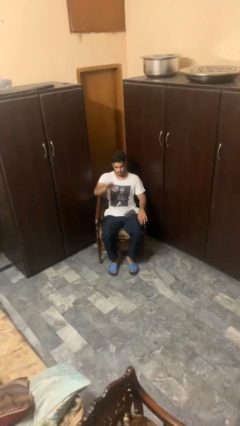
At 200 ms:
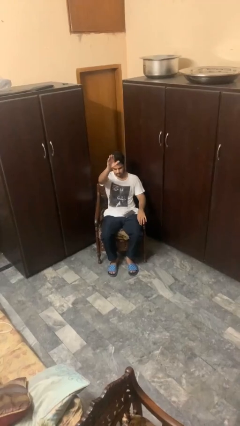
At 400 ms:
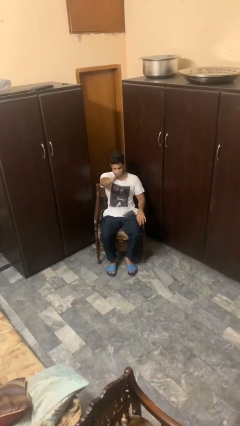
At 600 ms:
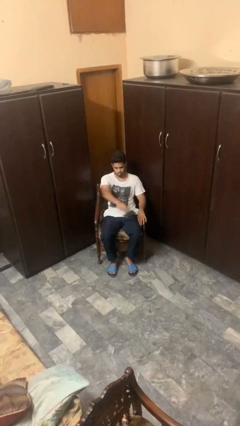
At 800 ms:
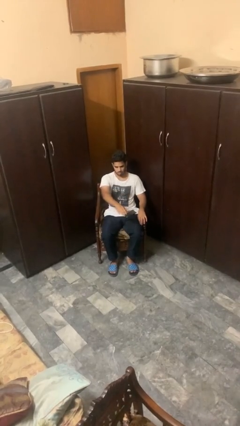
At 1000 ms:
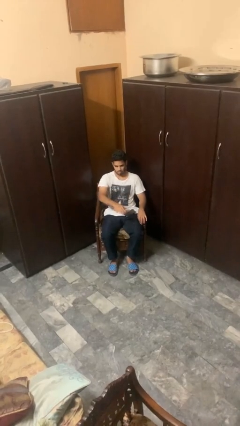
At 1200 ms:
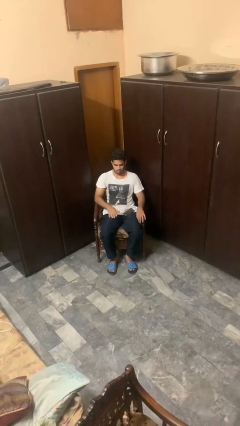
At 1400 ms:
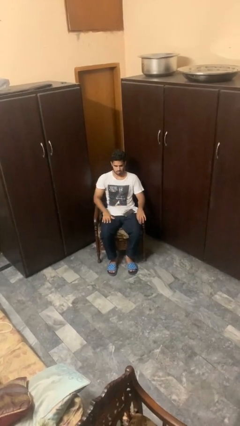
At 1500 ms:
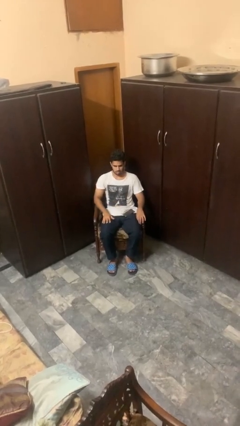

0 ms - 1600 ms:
person gestures swipe down

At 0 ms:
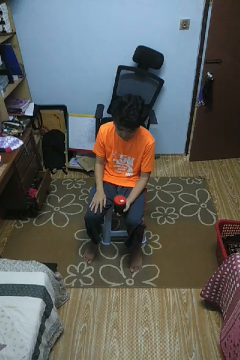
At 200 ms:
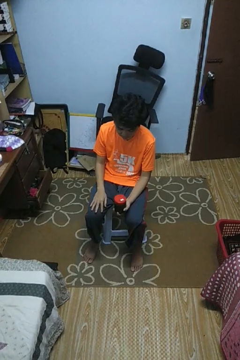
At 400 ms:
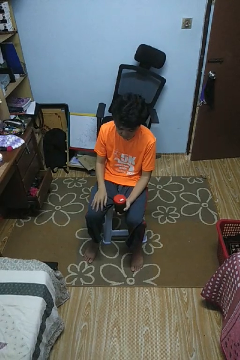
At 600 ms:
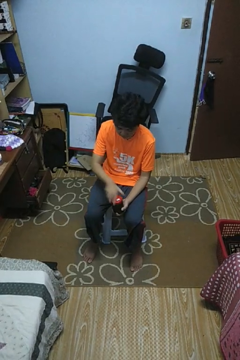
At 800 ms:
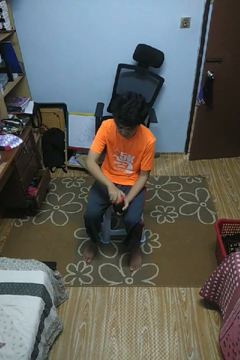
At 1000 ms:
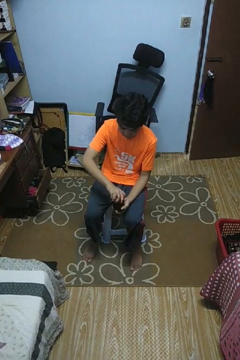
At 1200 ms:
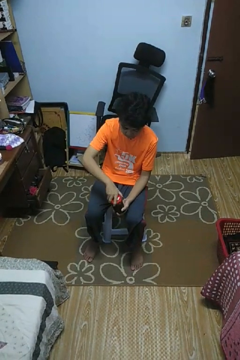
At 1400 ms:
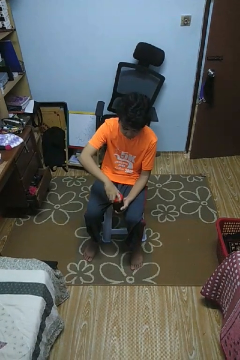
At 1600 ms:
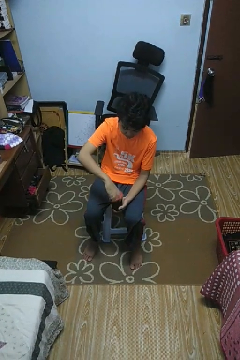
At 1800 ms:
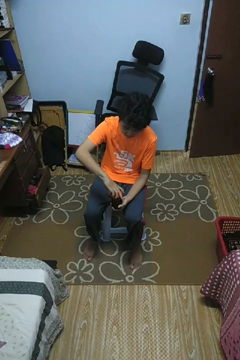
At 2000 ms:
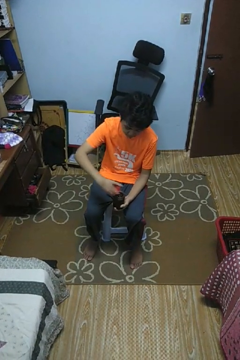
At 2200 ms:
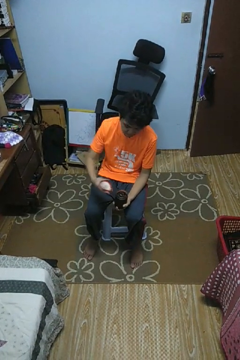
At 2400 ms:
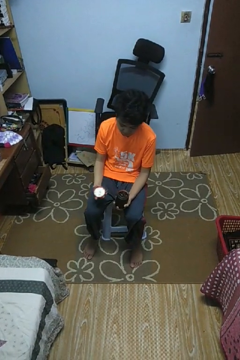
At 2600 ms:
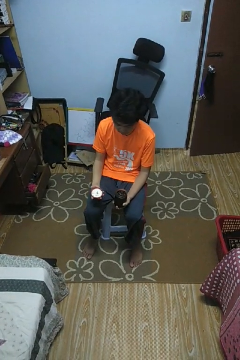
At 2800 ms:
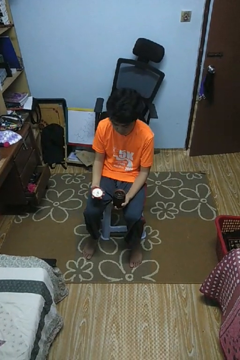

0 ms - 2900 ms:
person opens jar

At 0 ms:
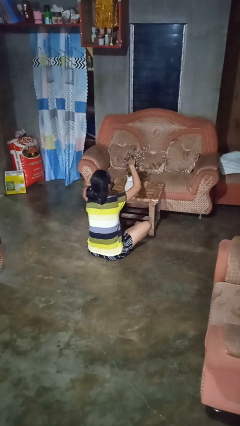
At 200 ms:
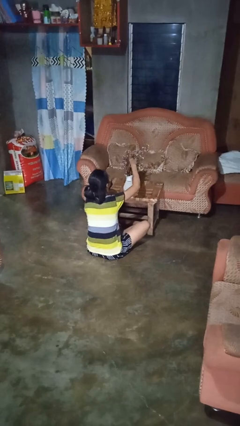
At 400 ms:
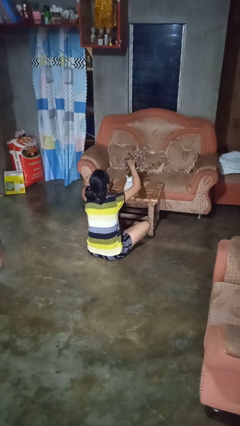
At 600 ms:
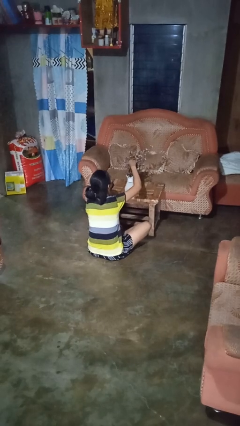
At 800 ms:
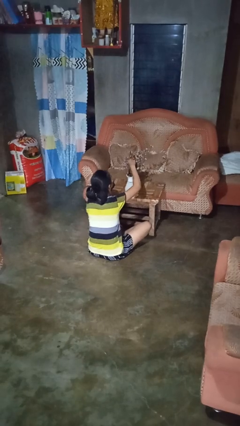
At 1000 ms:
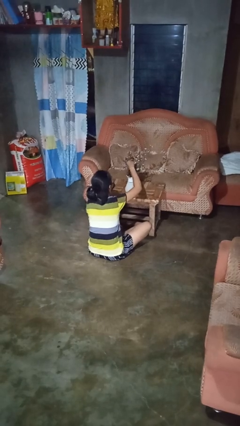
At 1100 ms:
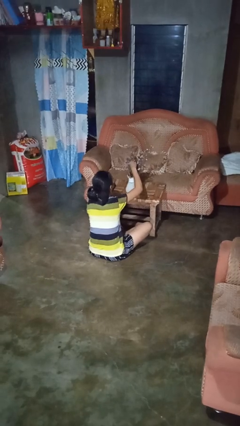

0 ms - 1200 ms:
person arranges flowers in vase

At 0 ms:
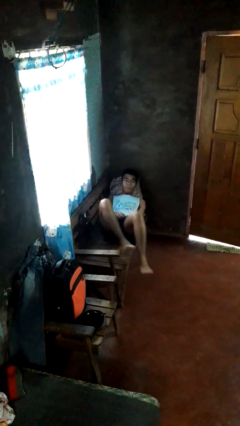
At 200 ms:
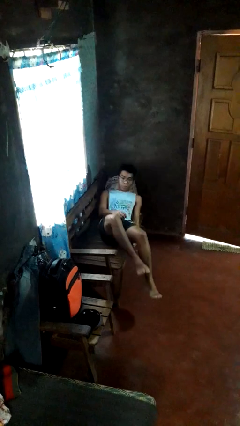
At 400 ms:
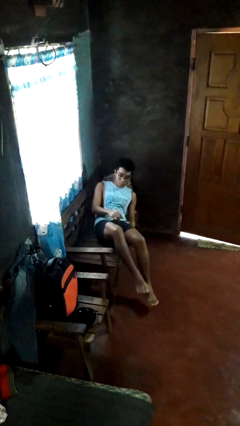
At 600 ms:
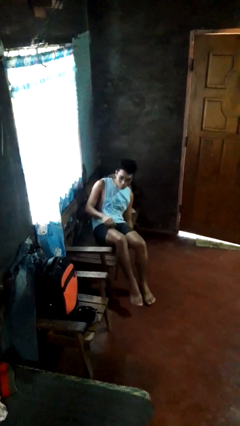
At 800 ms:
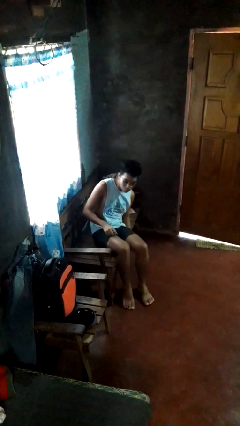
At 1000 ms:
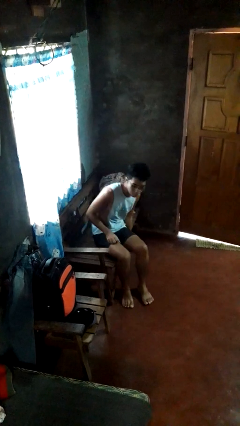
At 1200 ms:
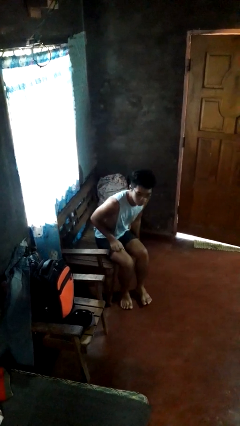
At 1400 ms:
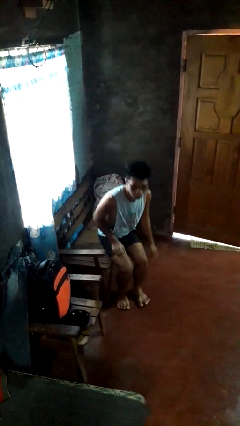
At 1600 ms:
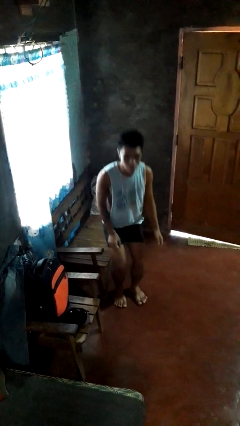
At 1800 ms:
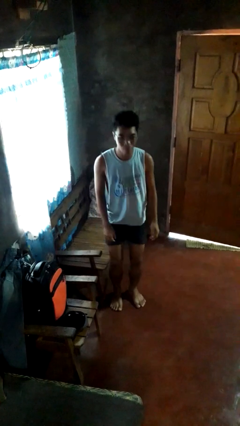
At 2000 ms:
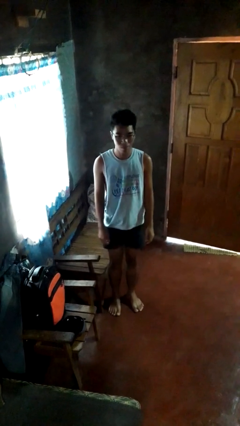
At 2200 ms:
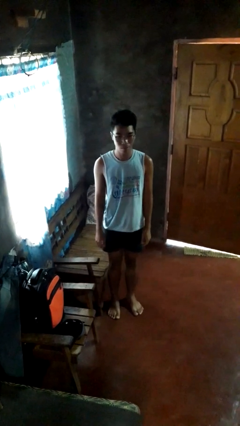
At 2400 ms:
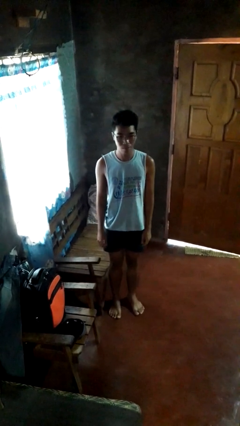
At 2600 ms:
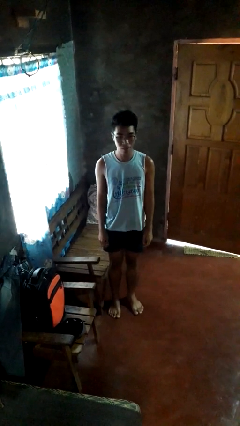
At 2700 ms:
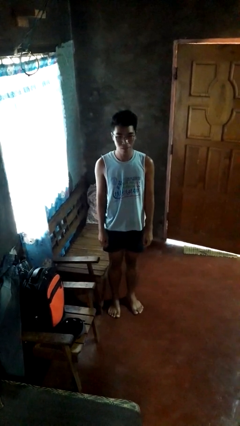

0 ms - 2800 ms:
person stands up

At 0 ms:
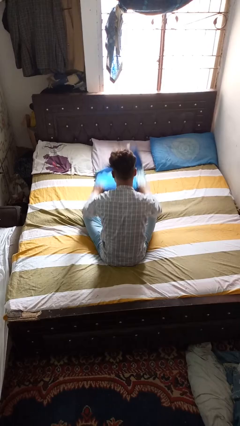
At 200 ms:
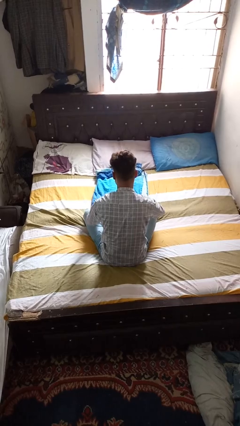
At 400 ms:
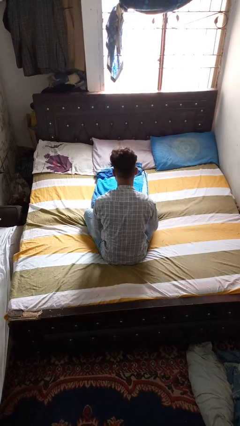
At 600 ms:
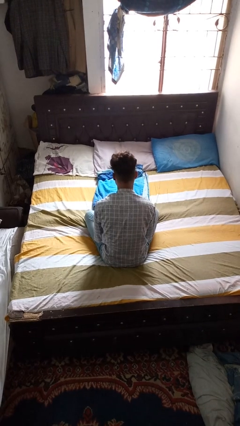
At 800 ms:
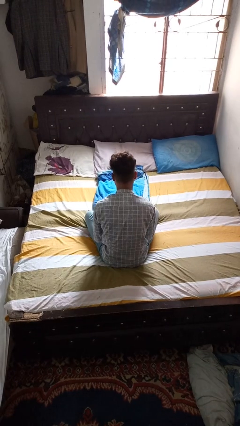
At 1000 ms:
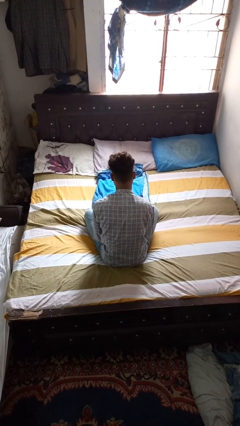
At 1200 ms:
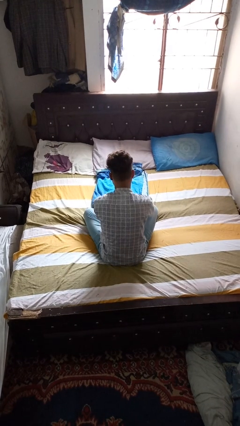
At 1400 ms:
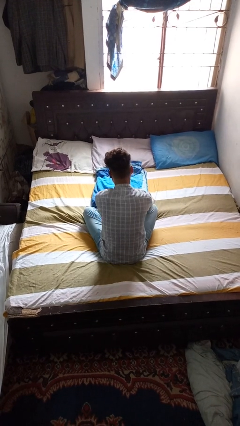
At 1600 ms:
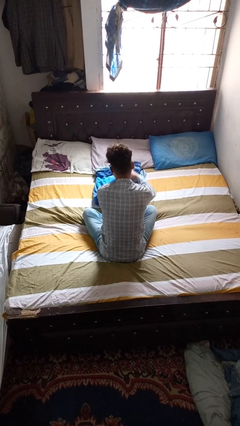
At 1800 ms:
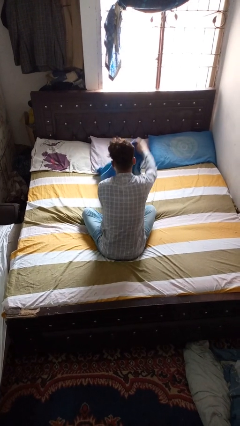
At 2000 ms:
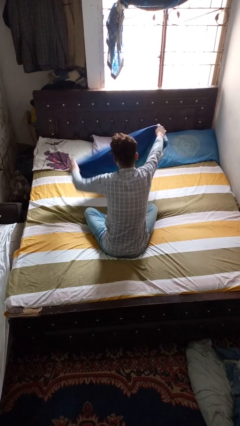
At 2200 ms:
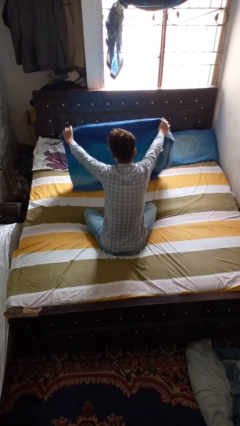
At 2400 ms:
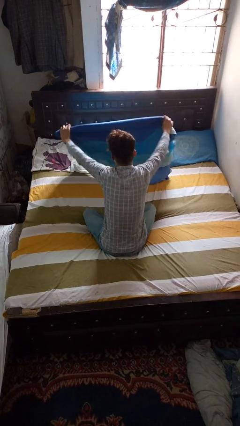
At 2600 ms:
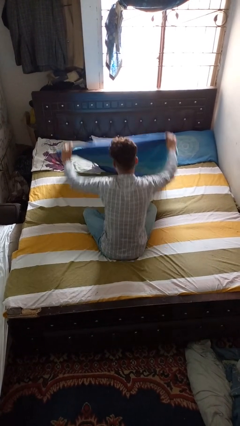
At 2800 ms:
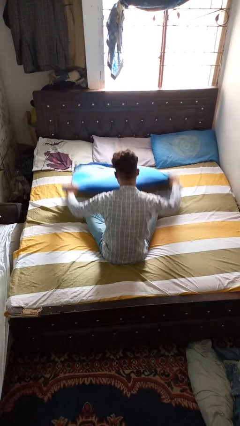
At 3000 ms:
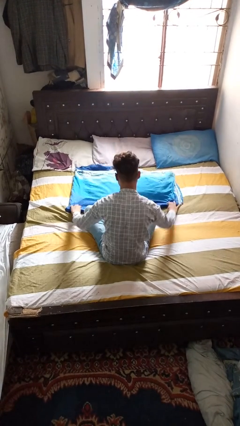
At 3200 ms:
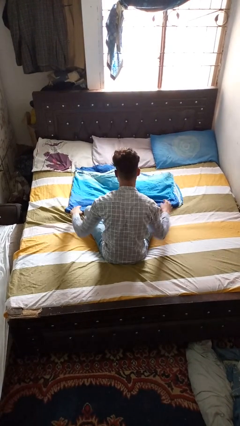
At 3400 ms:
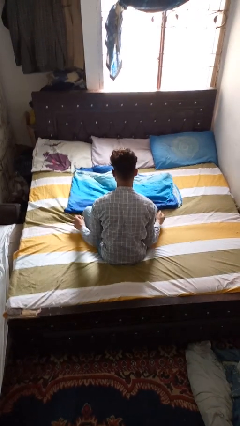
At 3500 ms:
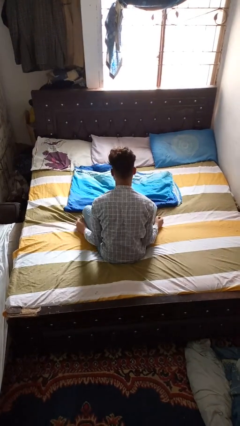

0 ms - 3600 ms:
person unfolds blanket

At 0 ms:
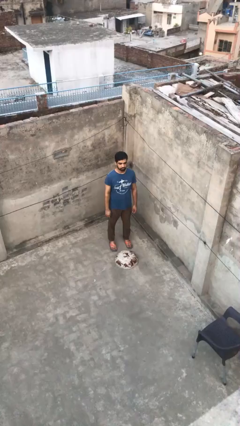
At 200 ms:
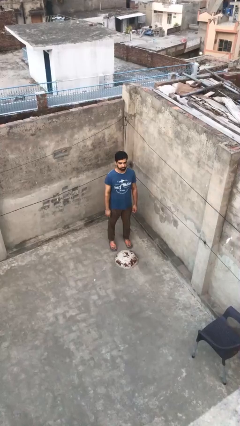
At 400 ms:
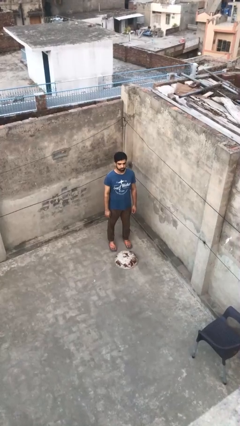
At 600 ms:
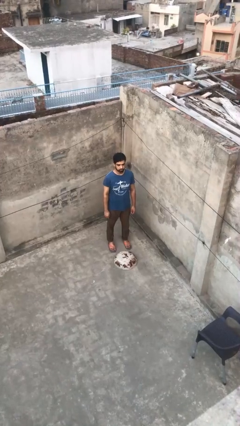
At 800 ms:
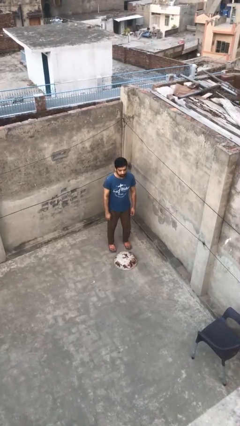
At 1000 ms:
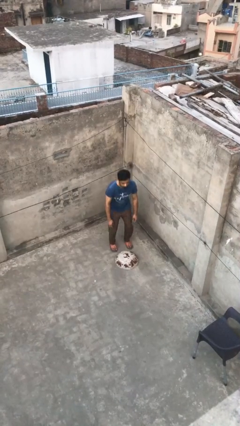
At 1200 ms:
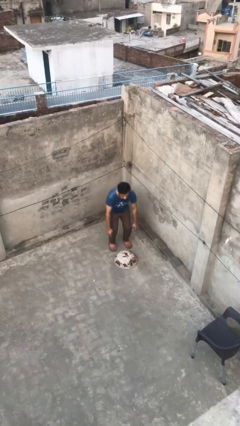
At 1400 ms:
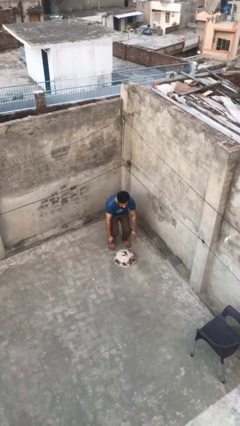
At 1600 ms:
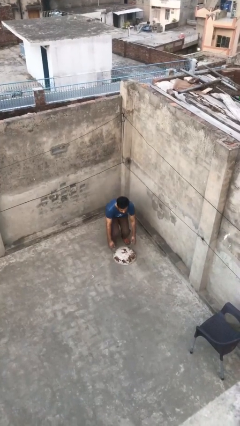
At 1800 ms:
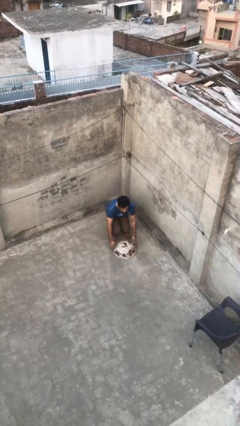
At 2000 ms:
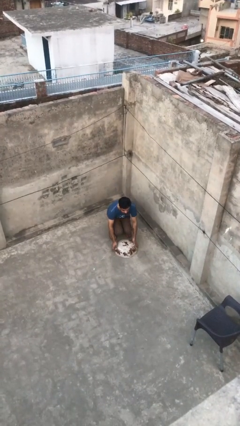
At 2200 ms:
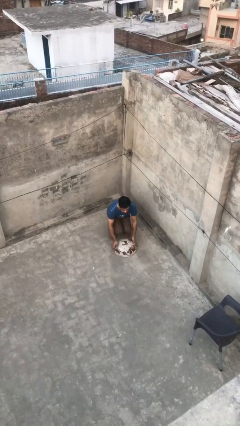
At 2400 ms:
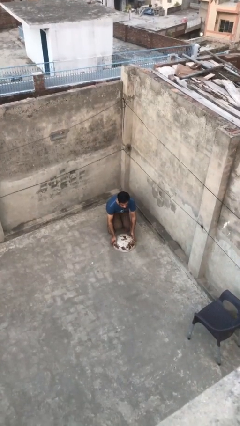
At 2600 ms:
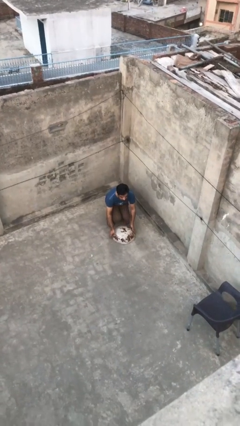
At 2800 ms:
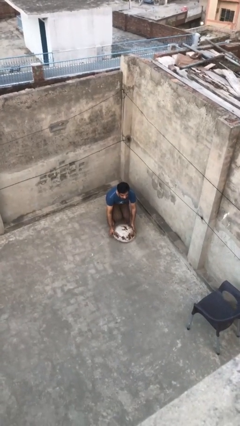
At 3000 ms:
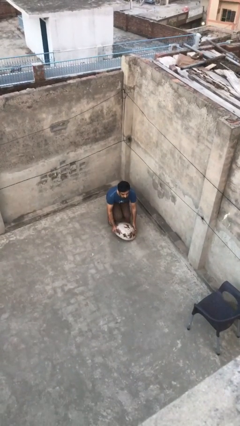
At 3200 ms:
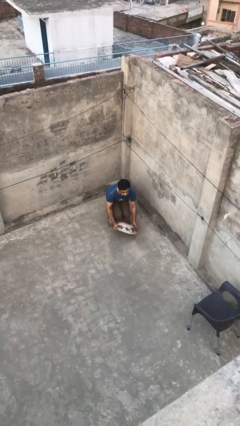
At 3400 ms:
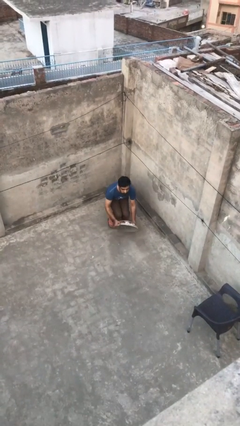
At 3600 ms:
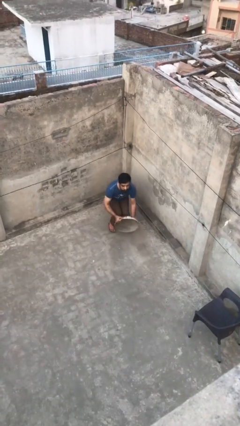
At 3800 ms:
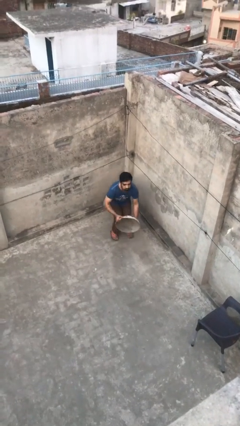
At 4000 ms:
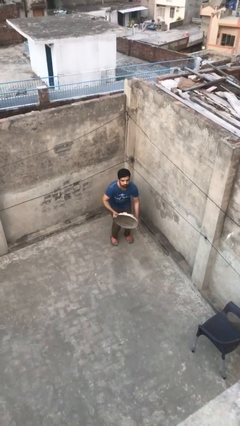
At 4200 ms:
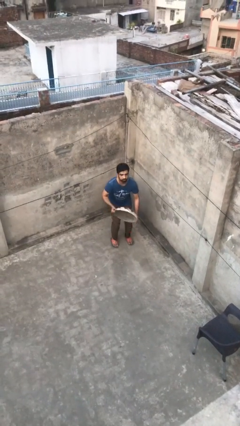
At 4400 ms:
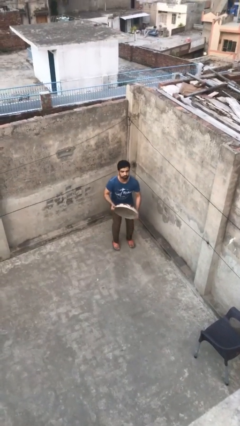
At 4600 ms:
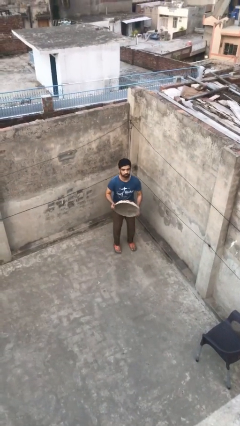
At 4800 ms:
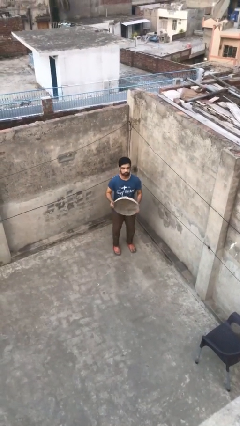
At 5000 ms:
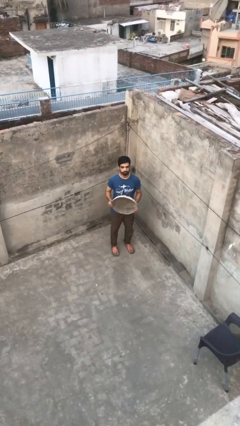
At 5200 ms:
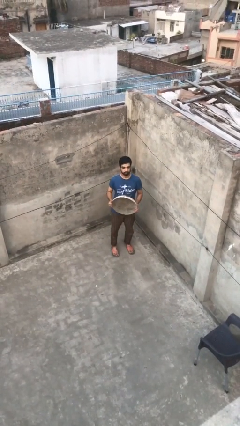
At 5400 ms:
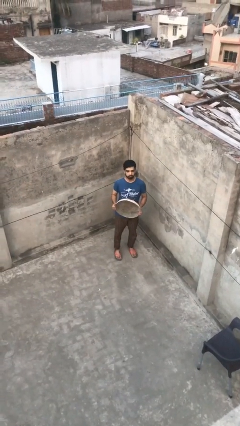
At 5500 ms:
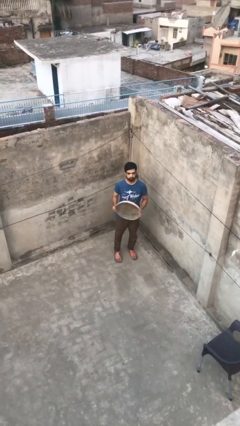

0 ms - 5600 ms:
person picks up object from floor
